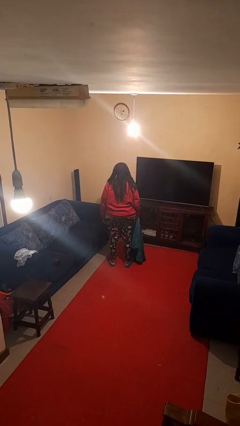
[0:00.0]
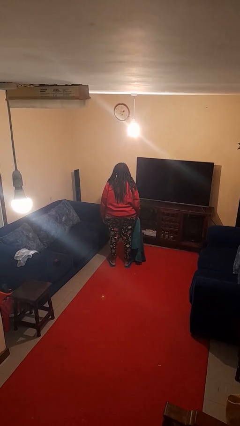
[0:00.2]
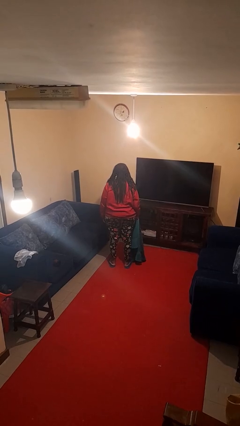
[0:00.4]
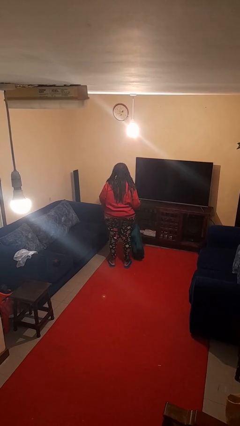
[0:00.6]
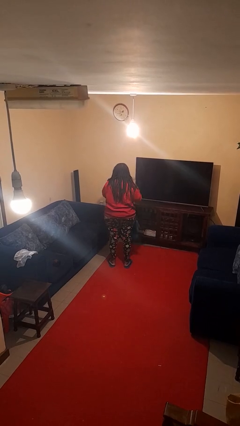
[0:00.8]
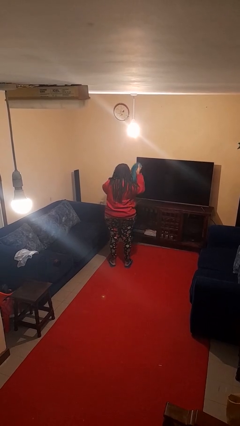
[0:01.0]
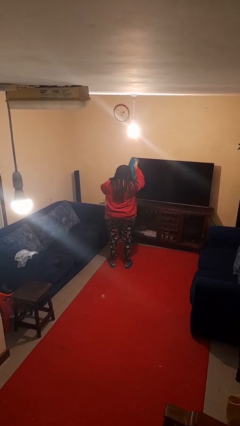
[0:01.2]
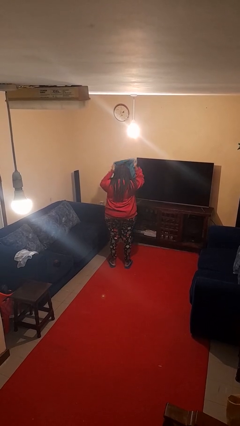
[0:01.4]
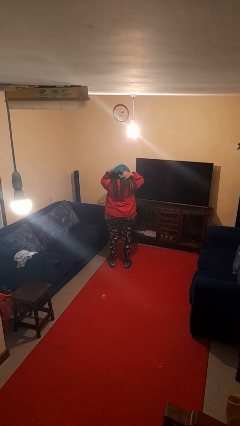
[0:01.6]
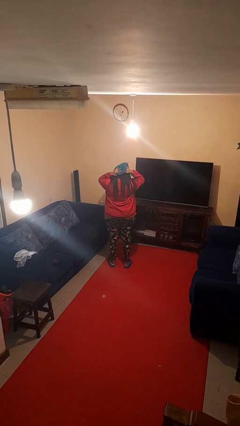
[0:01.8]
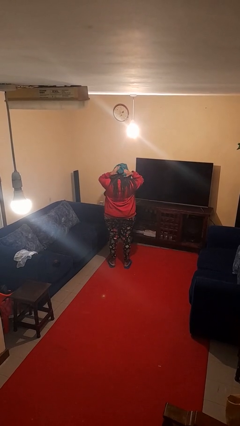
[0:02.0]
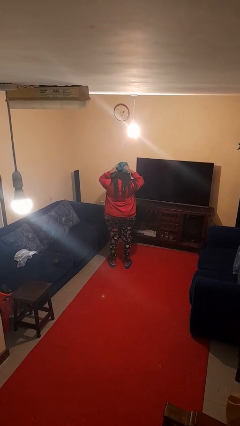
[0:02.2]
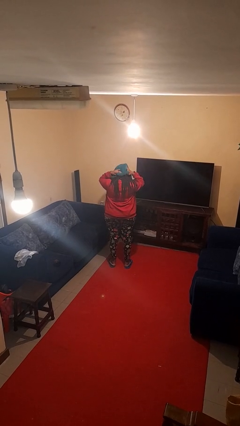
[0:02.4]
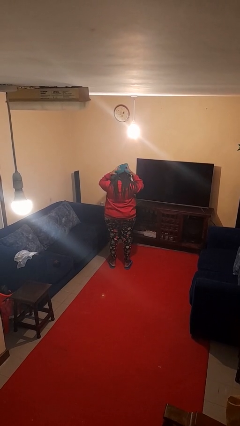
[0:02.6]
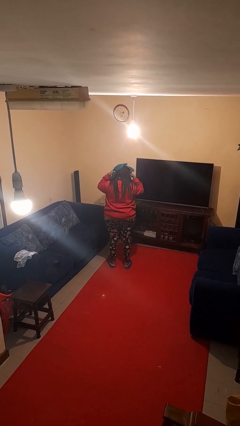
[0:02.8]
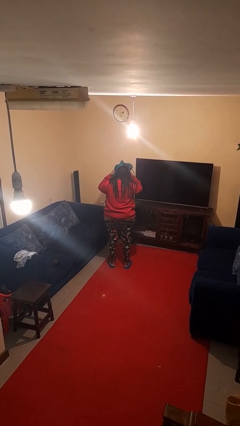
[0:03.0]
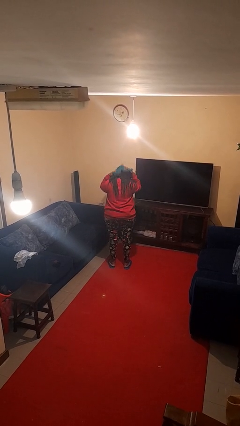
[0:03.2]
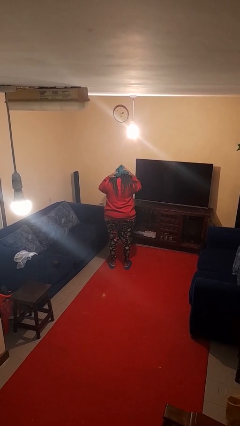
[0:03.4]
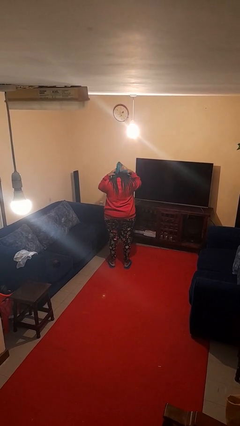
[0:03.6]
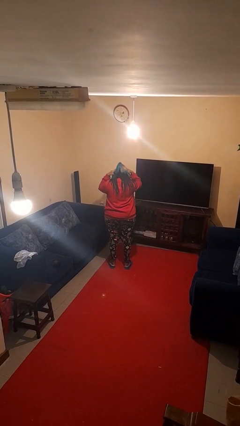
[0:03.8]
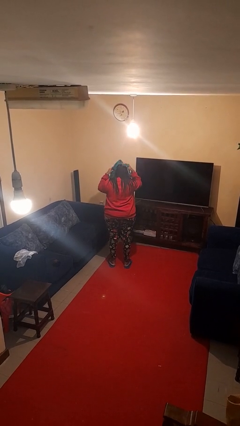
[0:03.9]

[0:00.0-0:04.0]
person dries hair with towel

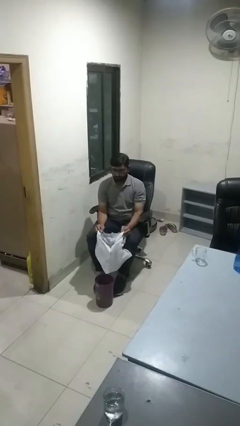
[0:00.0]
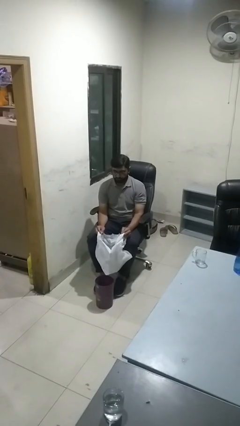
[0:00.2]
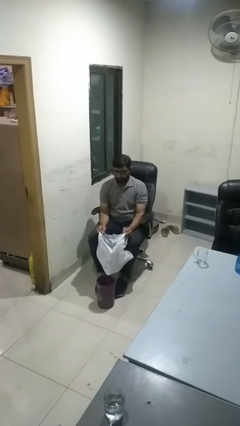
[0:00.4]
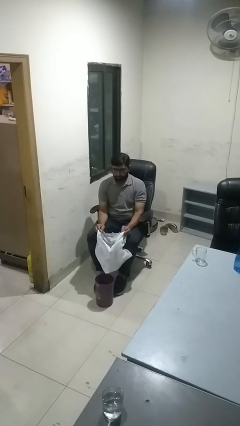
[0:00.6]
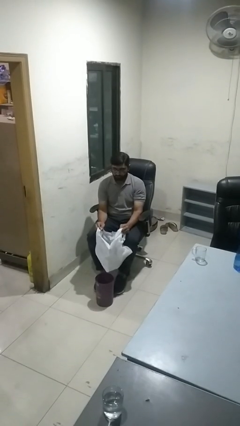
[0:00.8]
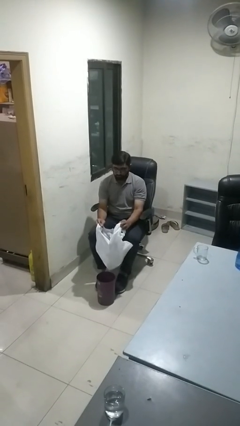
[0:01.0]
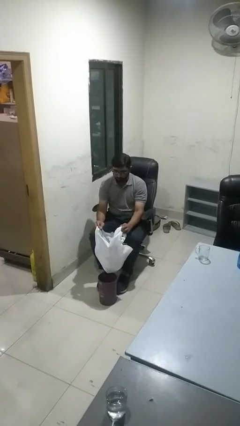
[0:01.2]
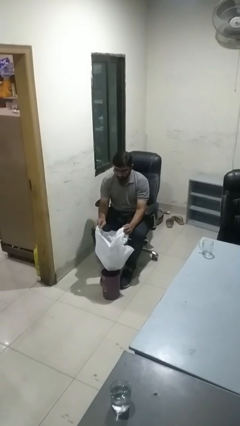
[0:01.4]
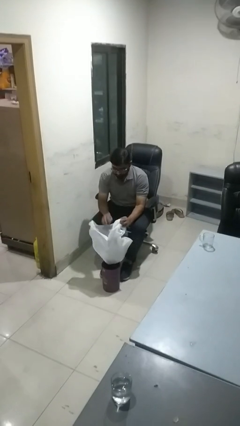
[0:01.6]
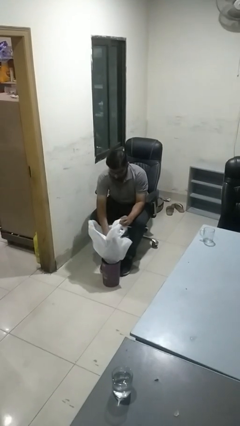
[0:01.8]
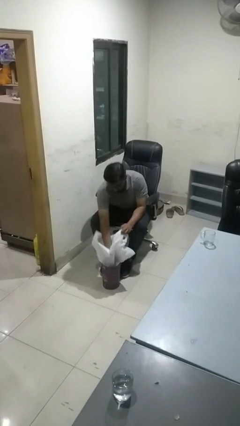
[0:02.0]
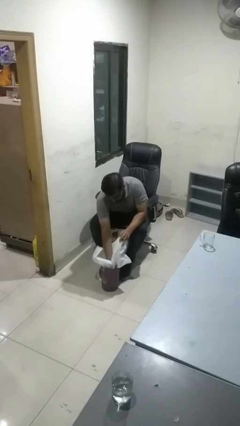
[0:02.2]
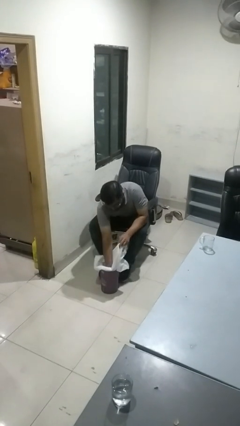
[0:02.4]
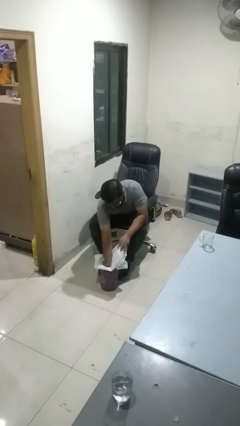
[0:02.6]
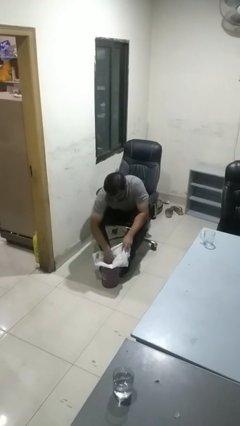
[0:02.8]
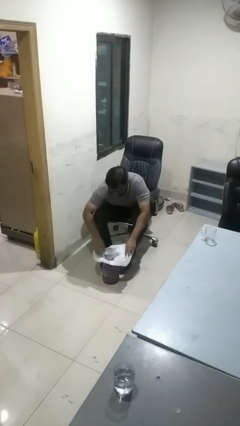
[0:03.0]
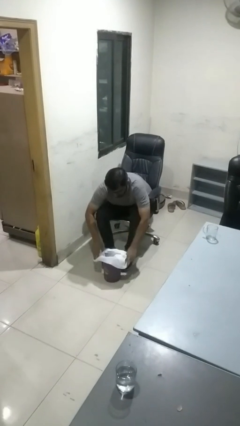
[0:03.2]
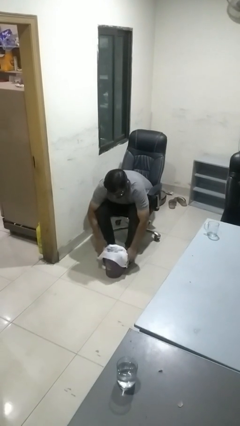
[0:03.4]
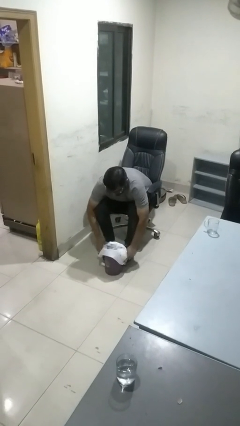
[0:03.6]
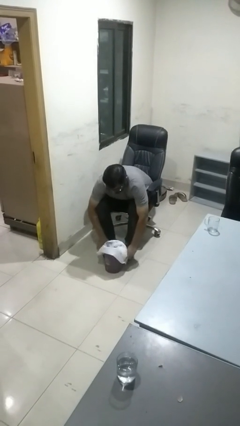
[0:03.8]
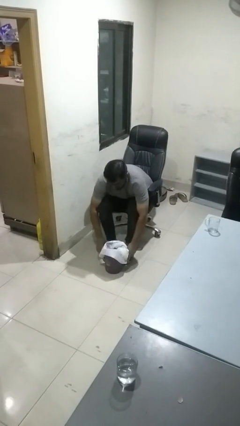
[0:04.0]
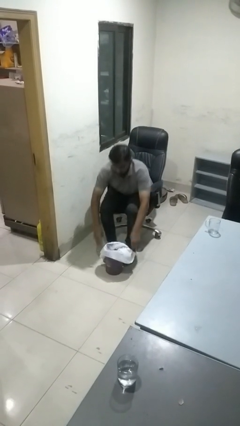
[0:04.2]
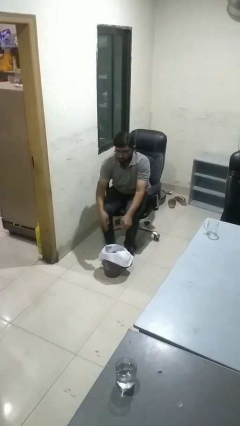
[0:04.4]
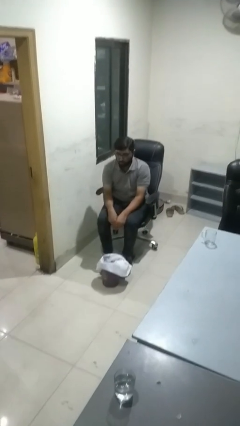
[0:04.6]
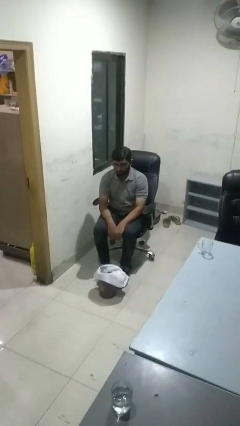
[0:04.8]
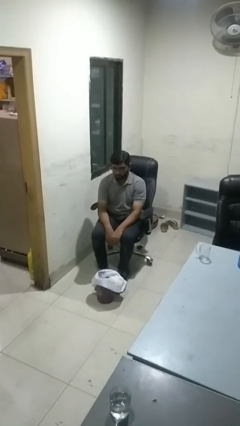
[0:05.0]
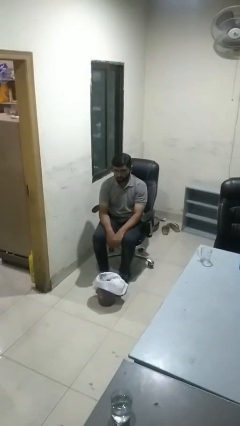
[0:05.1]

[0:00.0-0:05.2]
person inserts trashbag into trashcan

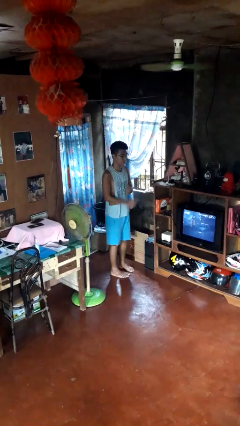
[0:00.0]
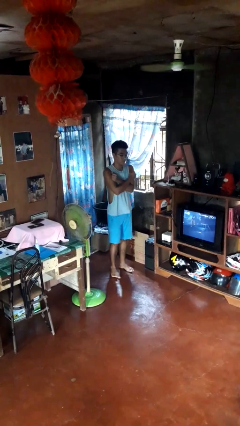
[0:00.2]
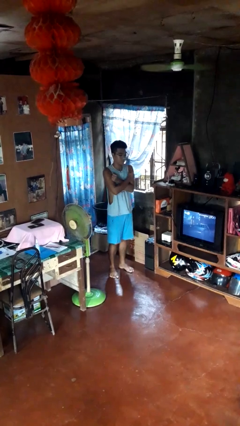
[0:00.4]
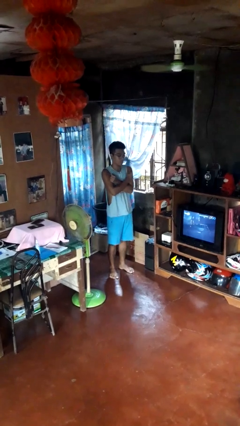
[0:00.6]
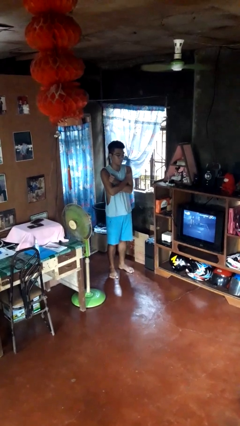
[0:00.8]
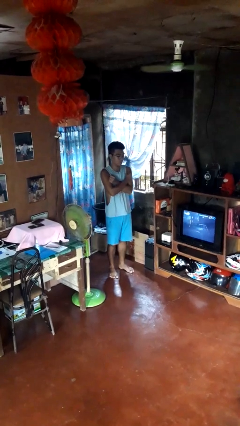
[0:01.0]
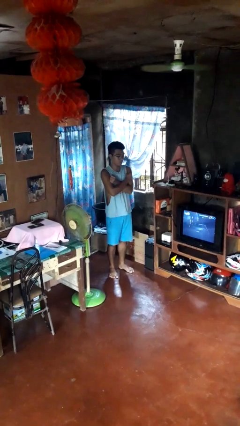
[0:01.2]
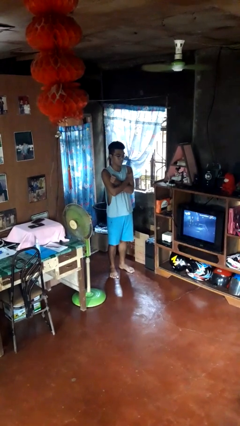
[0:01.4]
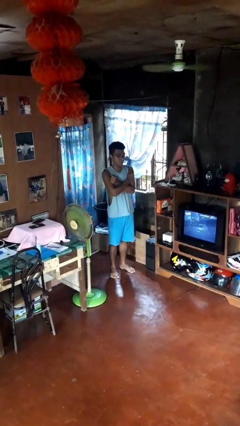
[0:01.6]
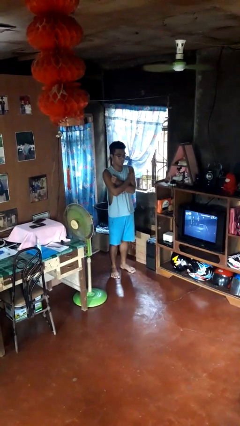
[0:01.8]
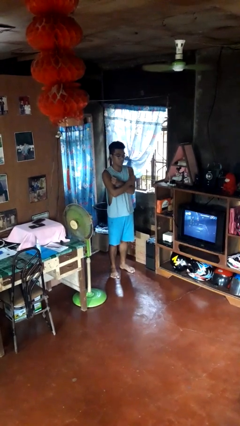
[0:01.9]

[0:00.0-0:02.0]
person gestures arms x

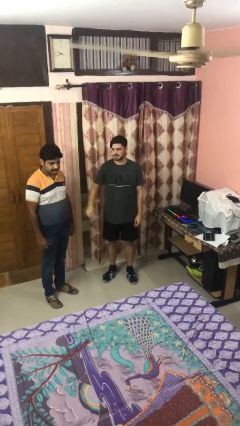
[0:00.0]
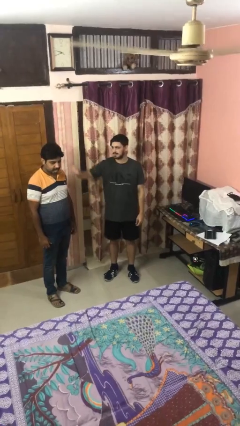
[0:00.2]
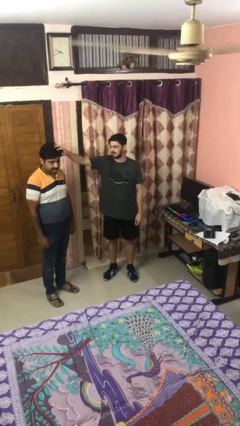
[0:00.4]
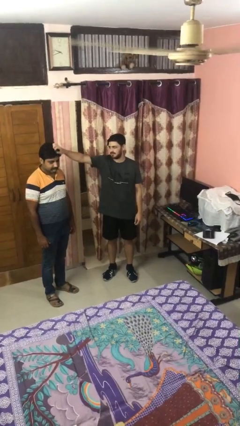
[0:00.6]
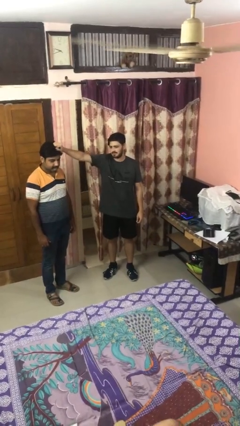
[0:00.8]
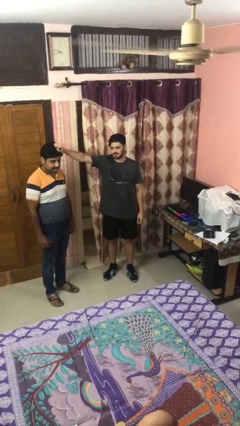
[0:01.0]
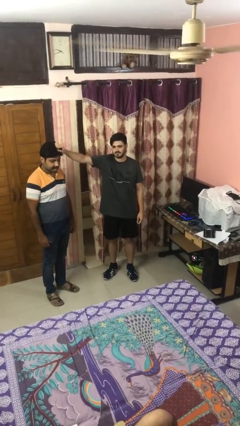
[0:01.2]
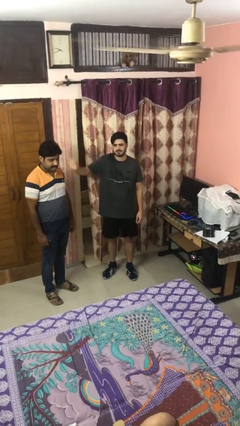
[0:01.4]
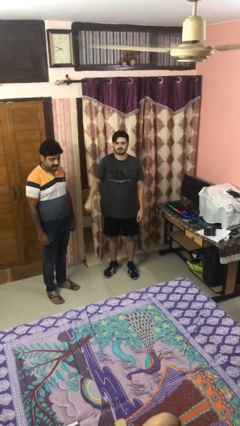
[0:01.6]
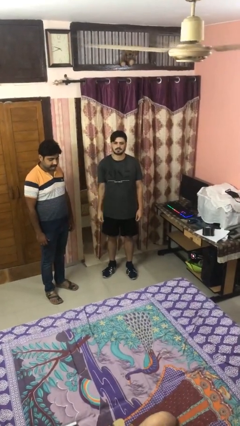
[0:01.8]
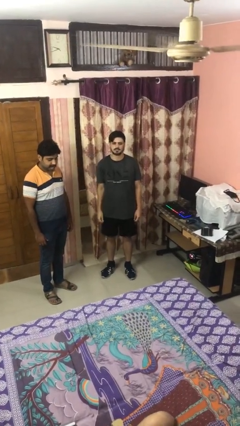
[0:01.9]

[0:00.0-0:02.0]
person grabs person by hair

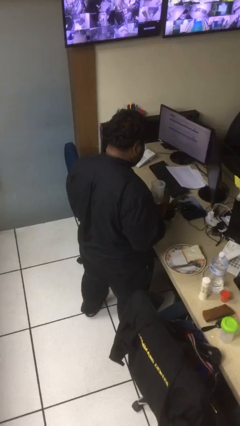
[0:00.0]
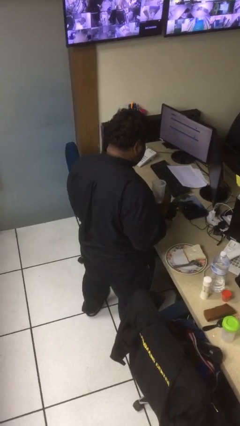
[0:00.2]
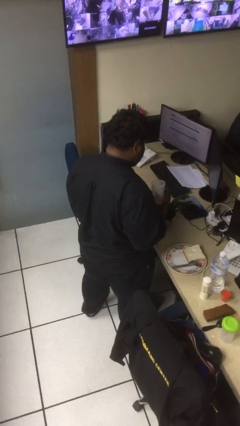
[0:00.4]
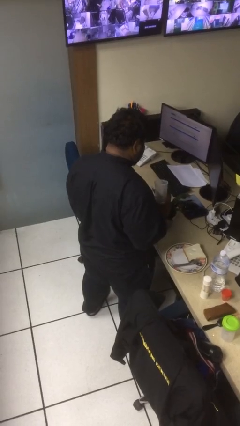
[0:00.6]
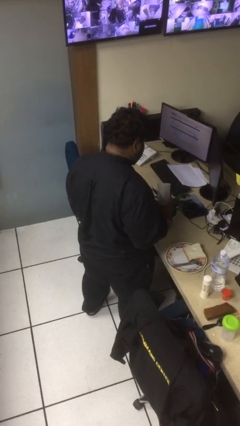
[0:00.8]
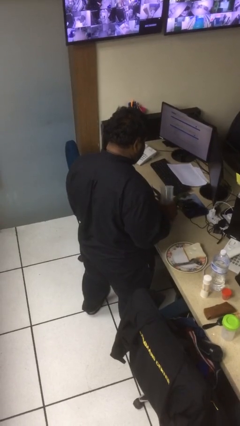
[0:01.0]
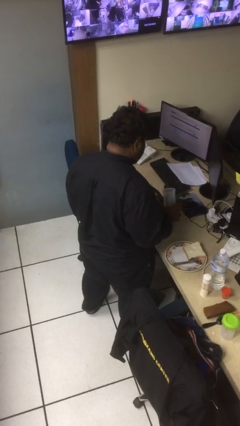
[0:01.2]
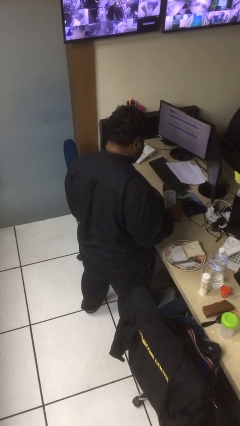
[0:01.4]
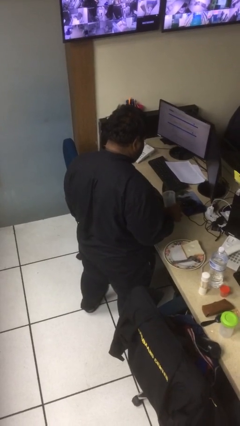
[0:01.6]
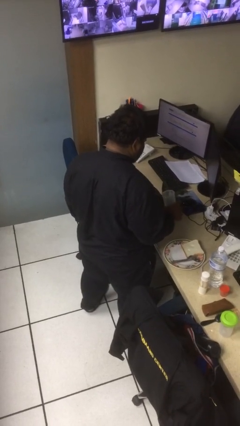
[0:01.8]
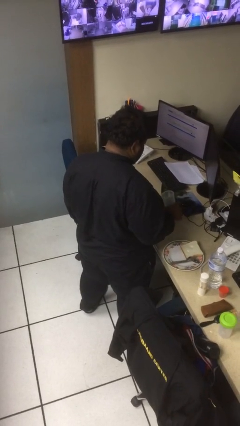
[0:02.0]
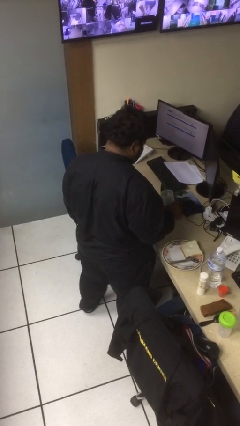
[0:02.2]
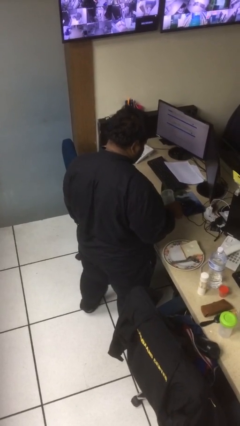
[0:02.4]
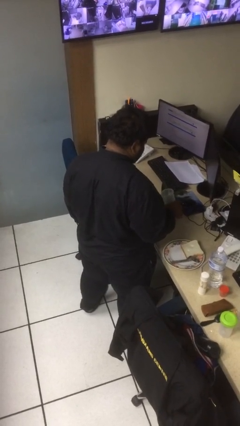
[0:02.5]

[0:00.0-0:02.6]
person waters houseplant

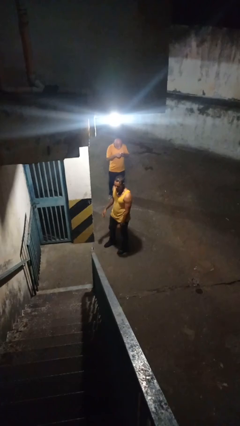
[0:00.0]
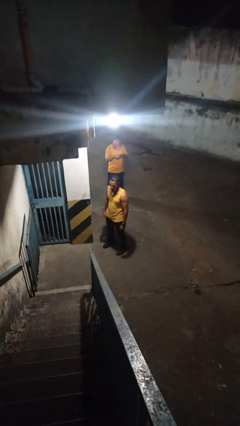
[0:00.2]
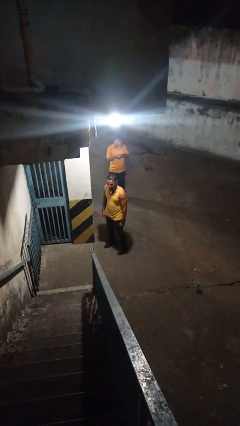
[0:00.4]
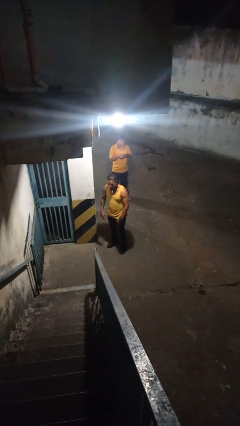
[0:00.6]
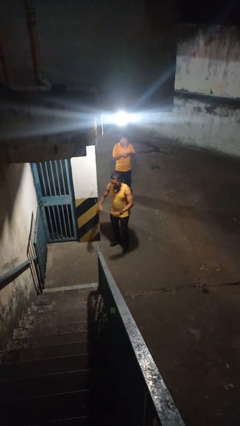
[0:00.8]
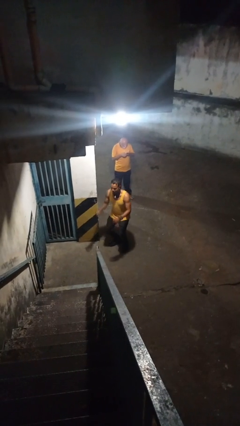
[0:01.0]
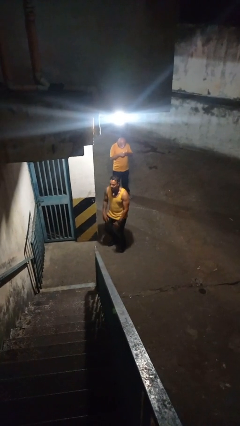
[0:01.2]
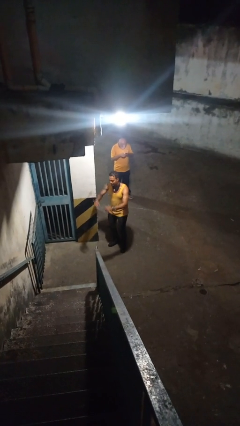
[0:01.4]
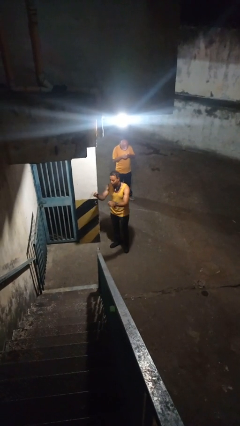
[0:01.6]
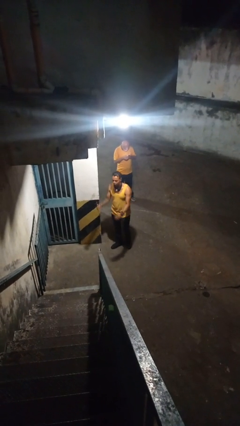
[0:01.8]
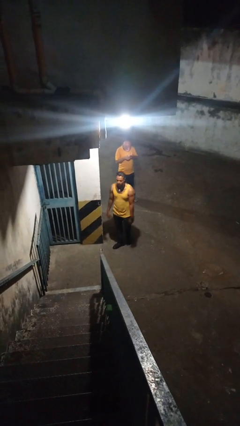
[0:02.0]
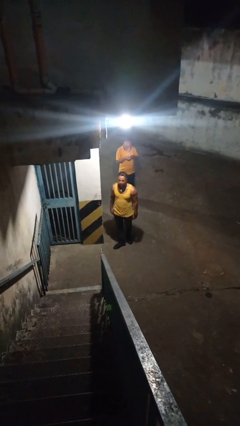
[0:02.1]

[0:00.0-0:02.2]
person slaps hands on thighs
